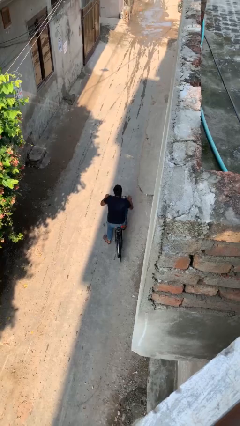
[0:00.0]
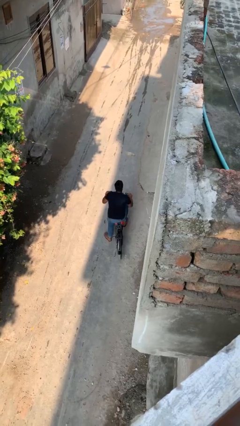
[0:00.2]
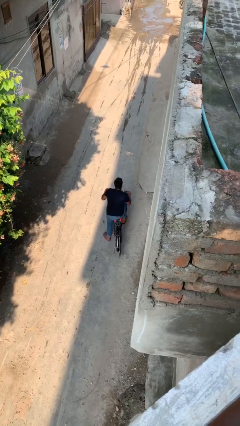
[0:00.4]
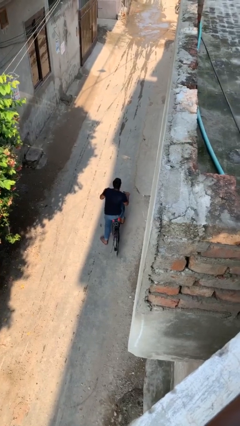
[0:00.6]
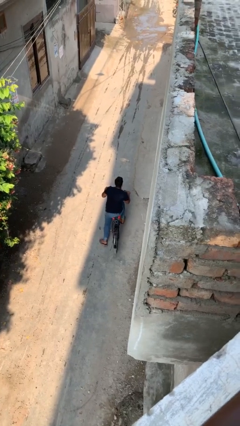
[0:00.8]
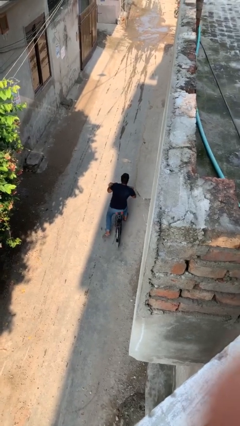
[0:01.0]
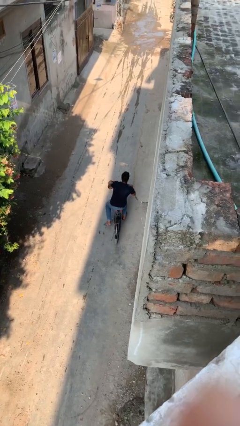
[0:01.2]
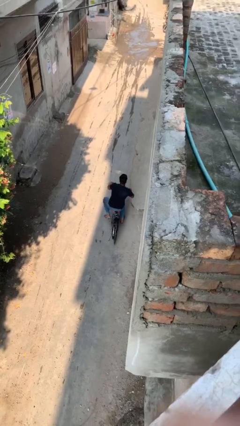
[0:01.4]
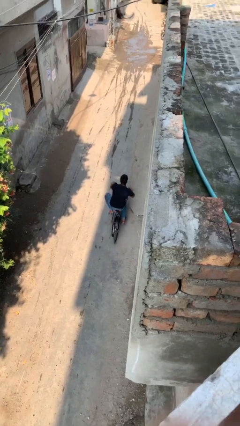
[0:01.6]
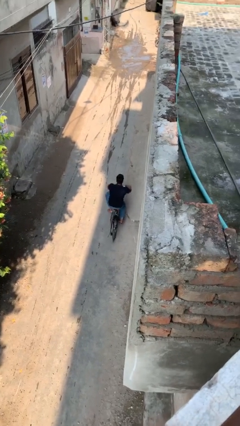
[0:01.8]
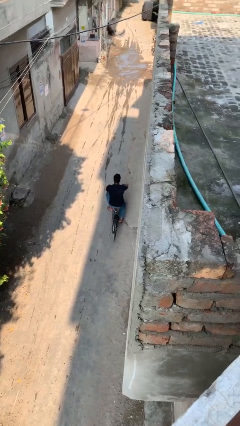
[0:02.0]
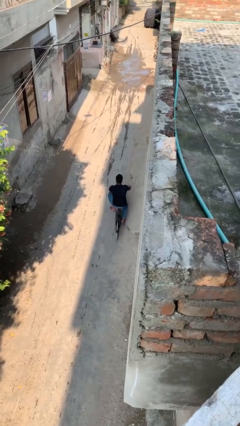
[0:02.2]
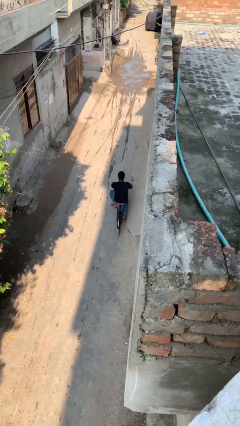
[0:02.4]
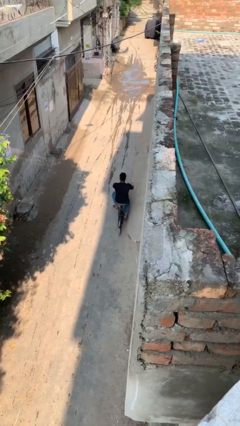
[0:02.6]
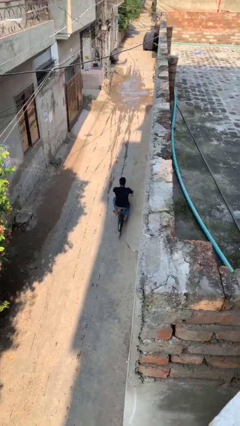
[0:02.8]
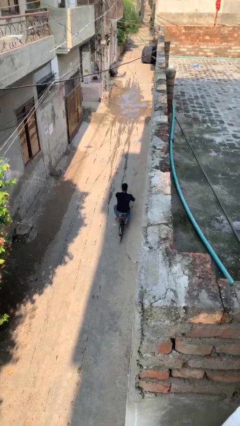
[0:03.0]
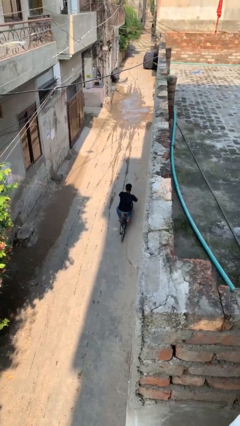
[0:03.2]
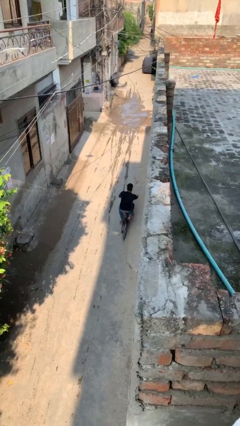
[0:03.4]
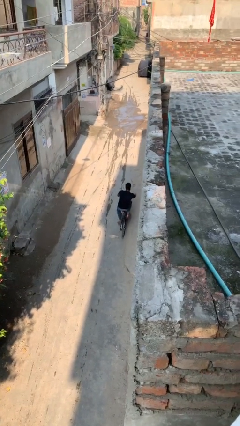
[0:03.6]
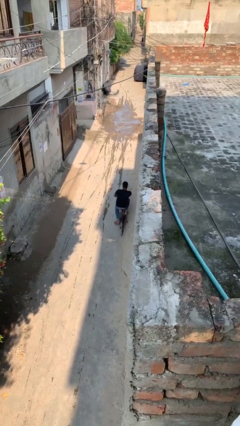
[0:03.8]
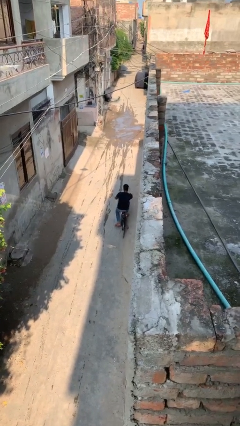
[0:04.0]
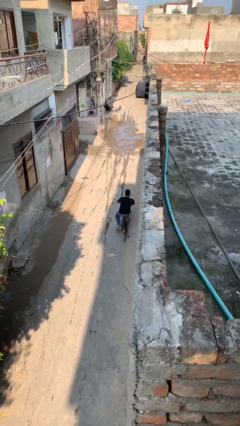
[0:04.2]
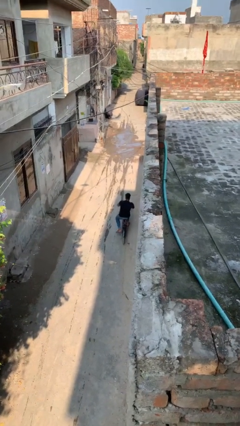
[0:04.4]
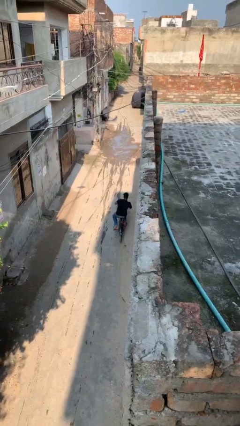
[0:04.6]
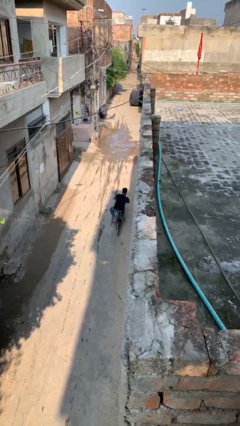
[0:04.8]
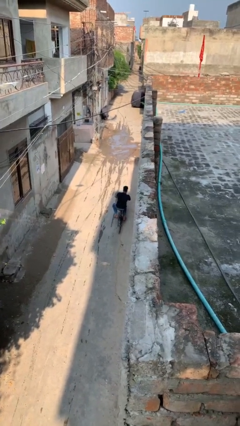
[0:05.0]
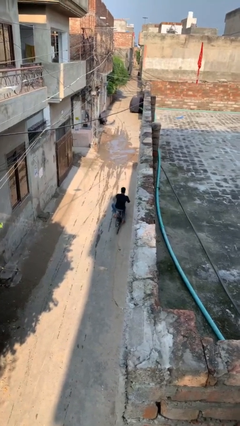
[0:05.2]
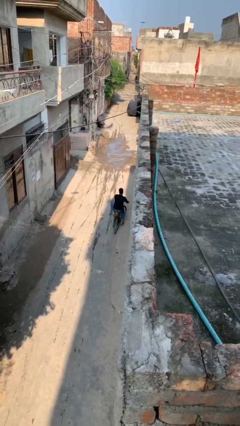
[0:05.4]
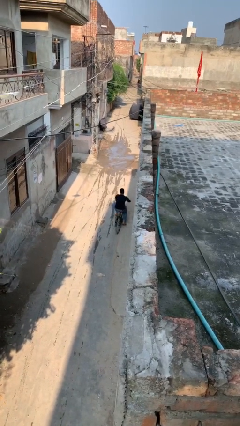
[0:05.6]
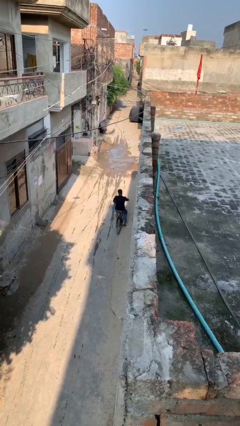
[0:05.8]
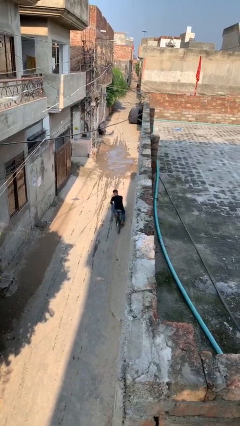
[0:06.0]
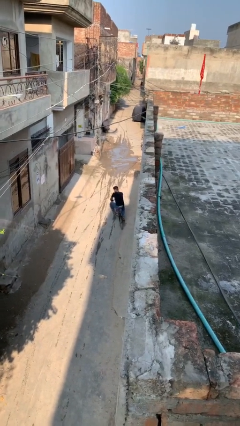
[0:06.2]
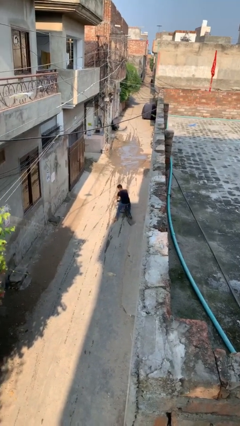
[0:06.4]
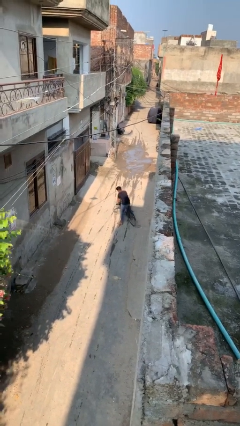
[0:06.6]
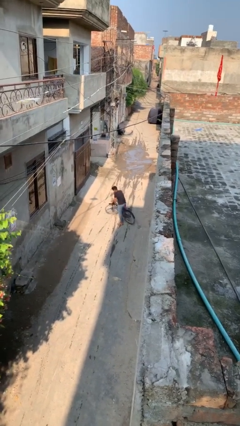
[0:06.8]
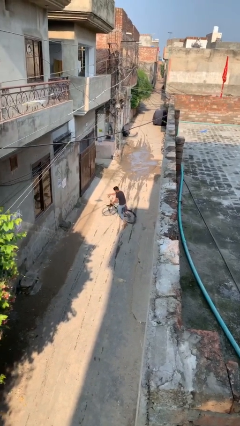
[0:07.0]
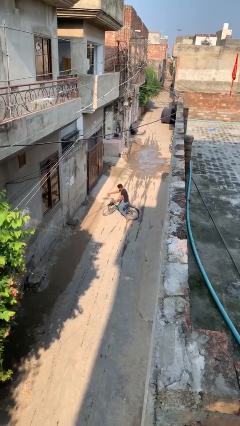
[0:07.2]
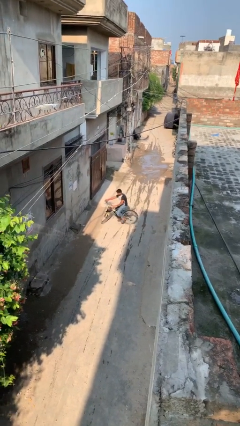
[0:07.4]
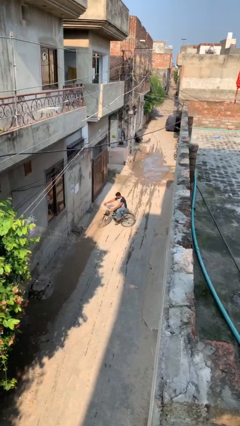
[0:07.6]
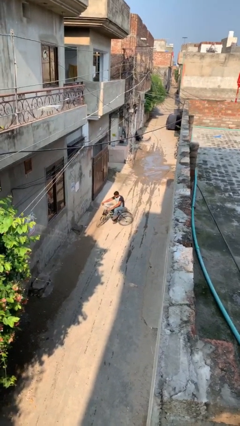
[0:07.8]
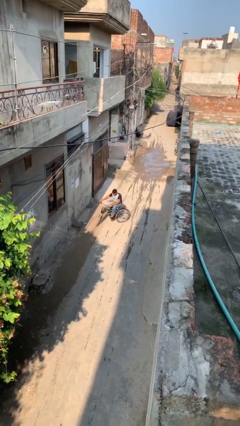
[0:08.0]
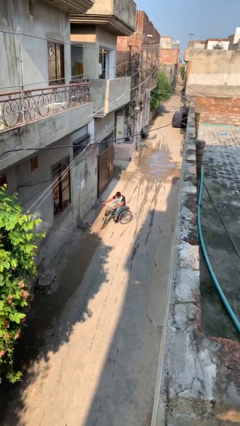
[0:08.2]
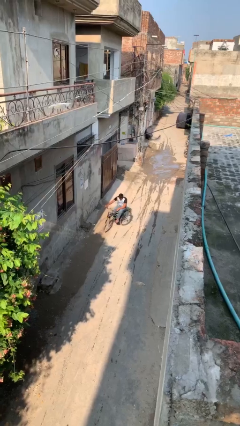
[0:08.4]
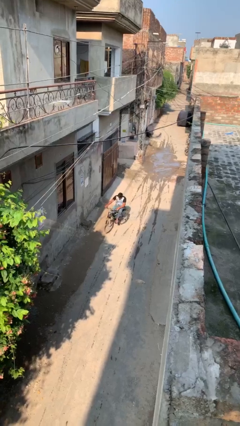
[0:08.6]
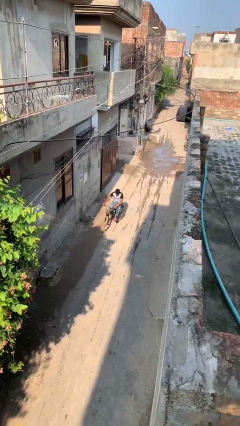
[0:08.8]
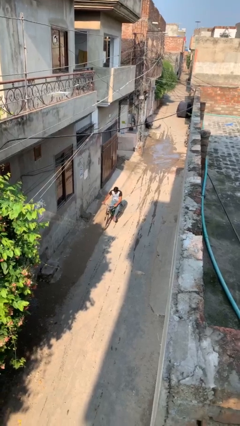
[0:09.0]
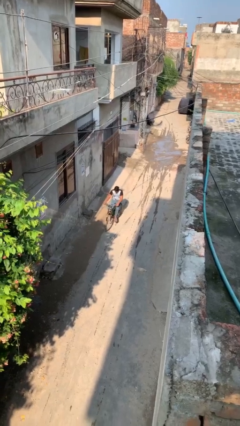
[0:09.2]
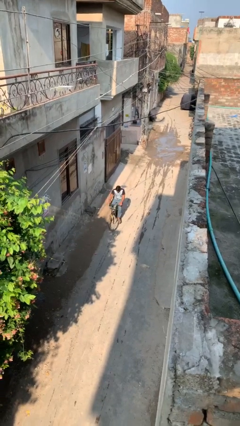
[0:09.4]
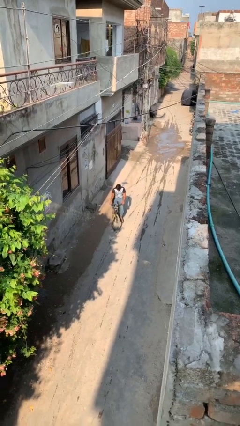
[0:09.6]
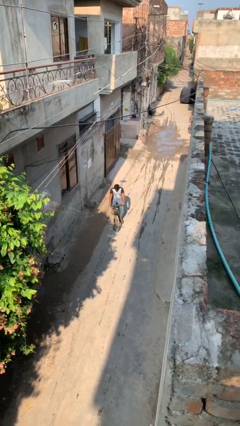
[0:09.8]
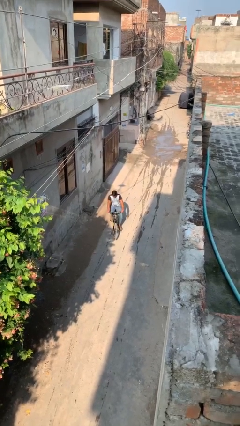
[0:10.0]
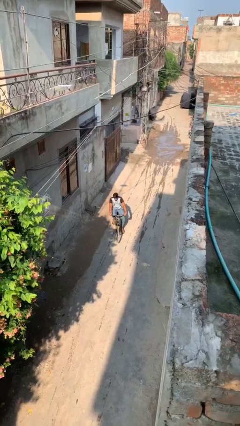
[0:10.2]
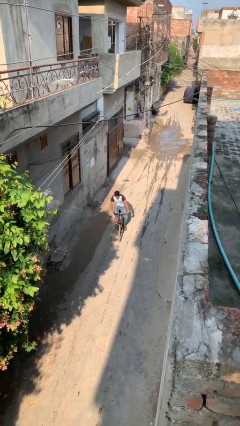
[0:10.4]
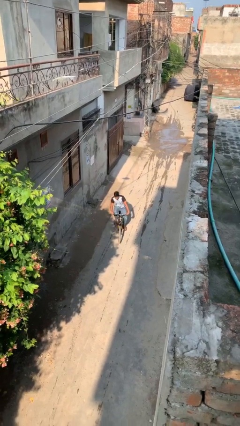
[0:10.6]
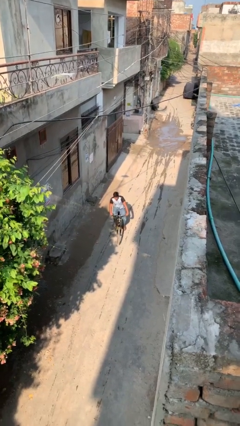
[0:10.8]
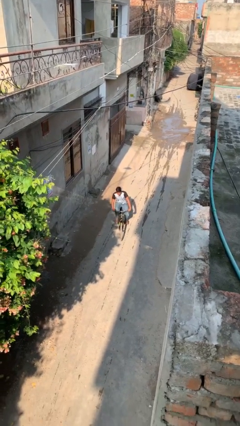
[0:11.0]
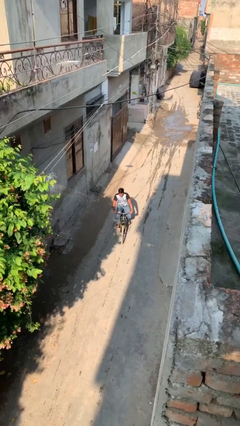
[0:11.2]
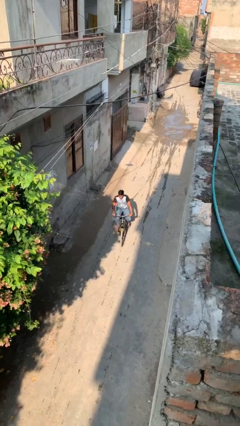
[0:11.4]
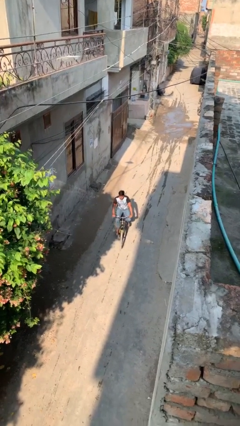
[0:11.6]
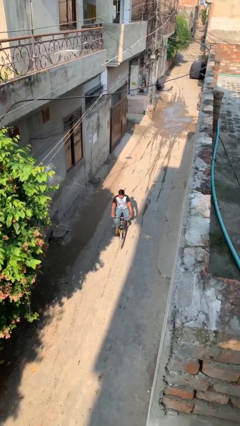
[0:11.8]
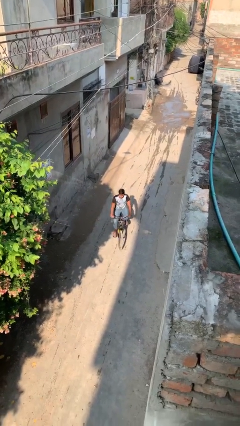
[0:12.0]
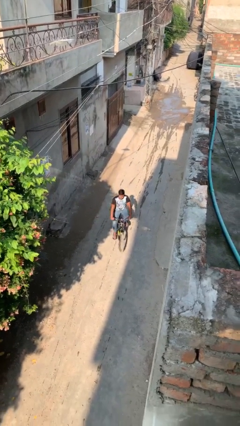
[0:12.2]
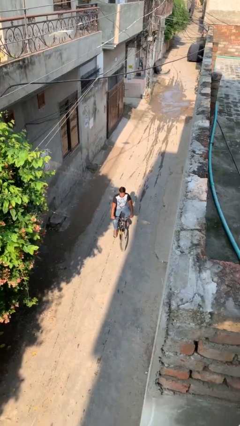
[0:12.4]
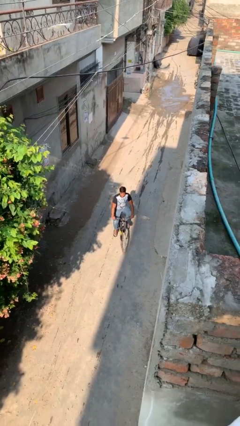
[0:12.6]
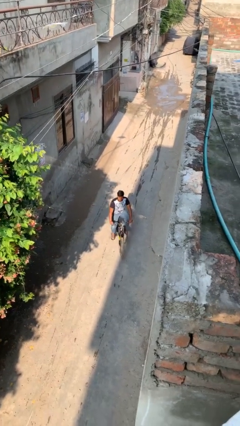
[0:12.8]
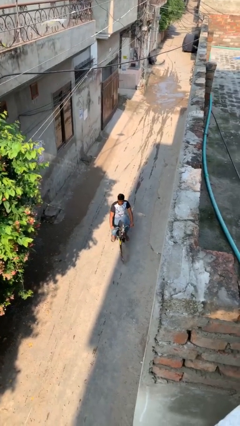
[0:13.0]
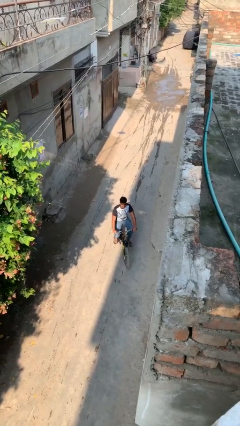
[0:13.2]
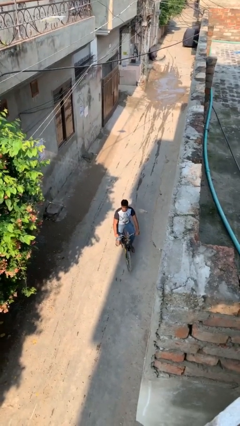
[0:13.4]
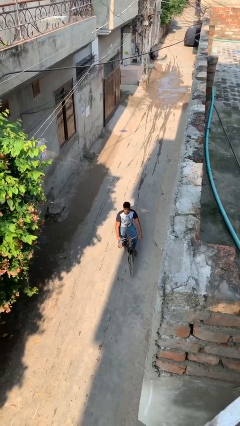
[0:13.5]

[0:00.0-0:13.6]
person rides bicycle

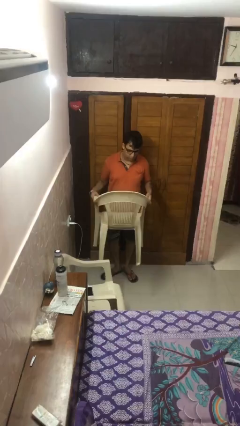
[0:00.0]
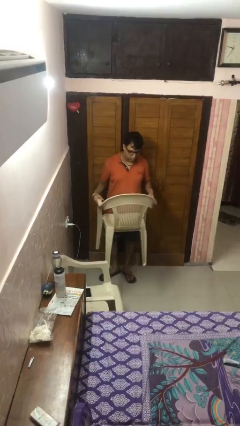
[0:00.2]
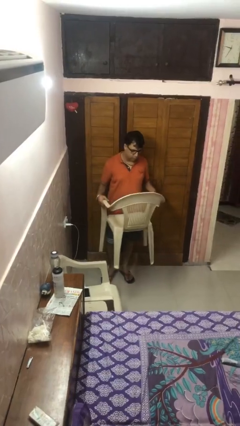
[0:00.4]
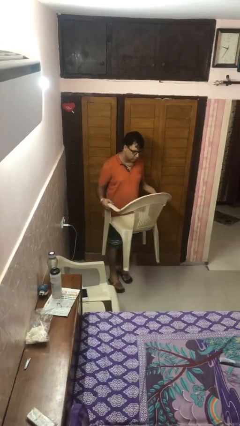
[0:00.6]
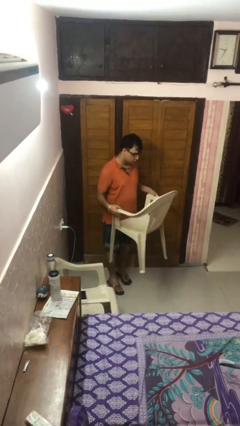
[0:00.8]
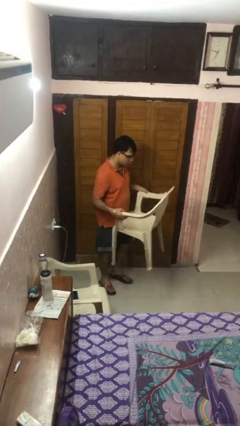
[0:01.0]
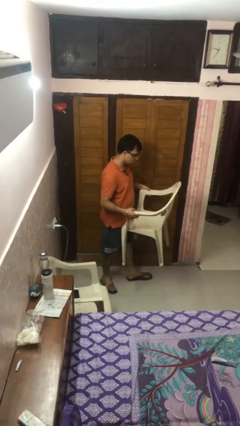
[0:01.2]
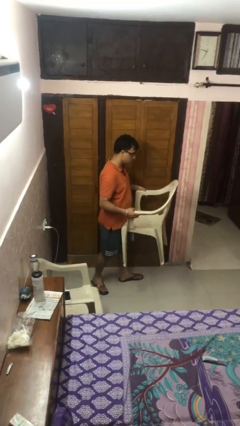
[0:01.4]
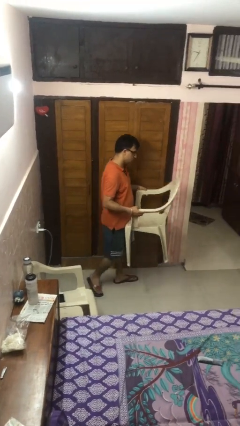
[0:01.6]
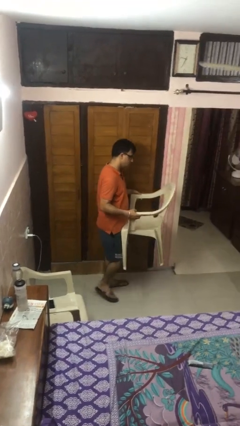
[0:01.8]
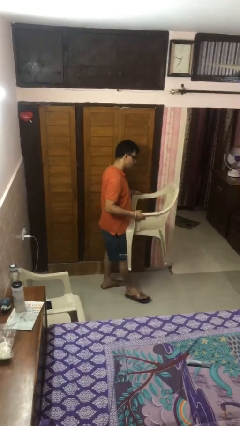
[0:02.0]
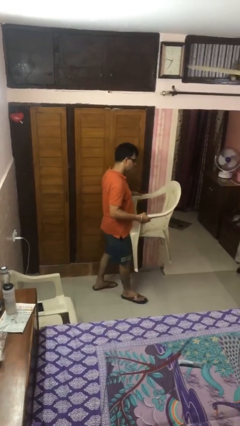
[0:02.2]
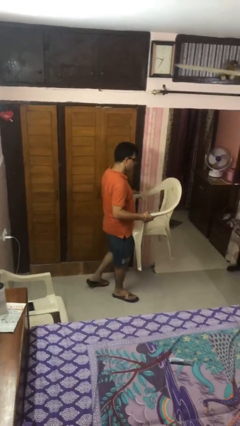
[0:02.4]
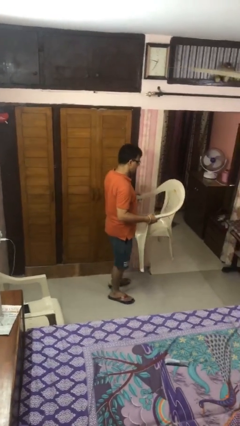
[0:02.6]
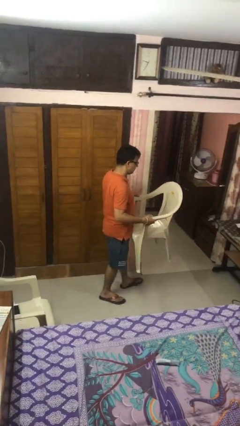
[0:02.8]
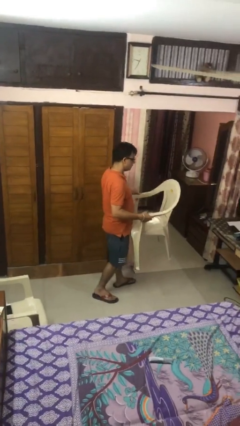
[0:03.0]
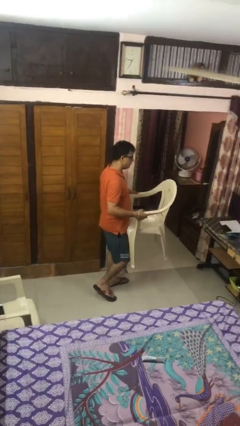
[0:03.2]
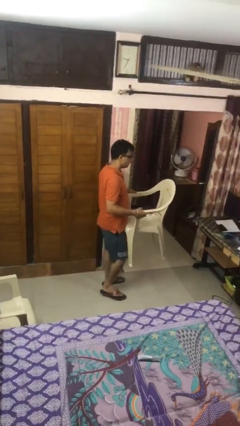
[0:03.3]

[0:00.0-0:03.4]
person carries furniture

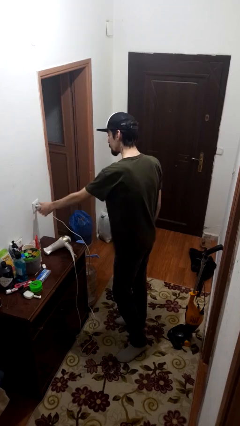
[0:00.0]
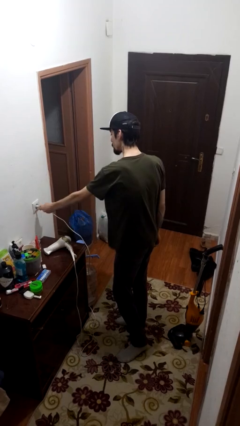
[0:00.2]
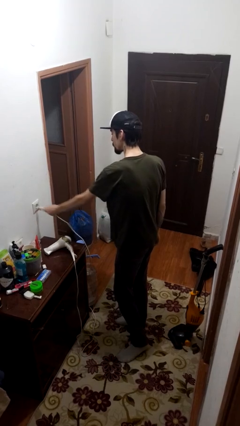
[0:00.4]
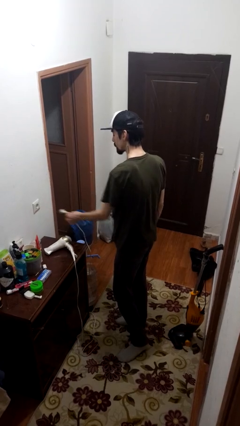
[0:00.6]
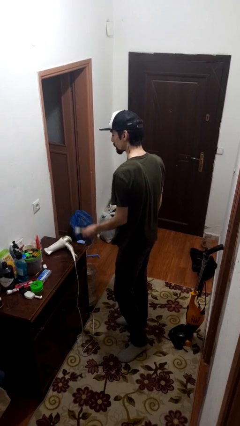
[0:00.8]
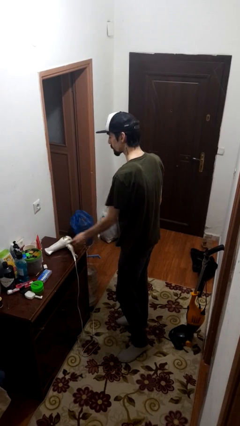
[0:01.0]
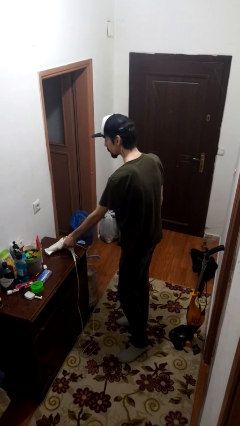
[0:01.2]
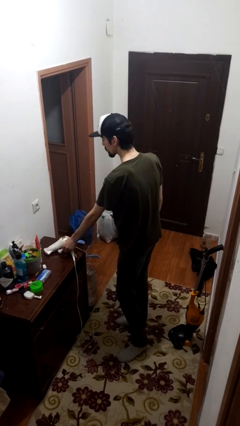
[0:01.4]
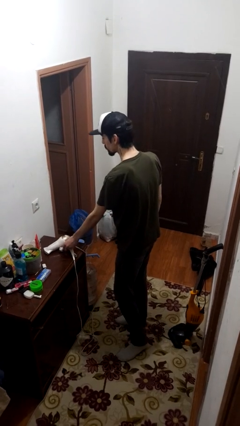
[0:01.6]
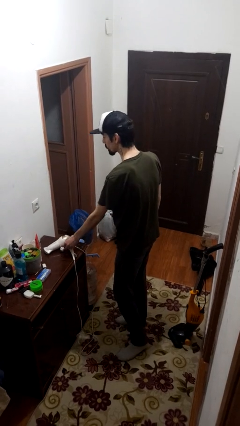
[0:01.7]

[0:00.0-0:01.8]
person unplugs from electrical socket
